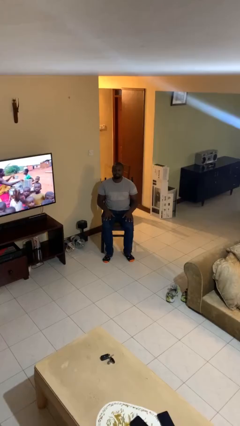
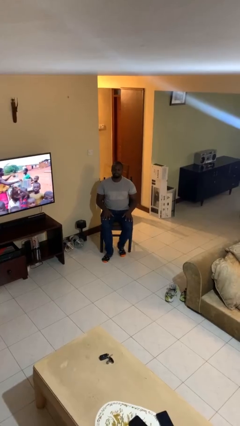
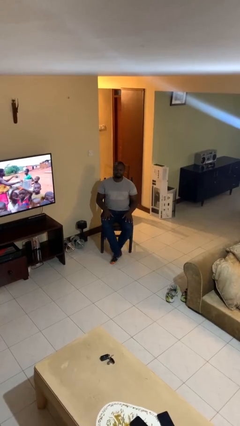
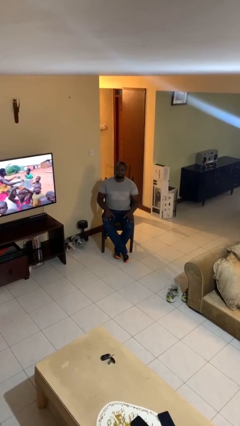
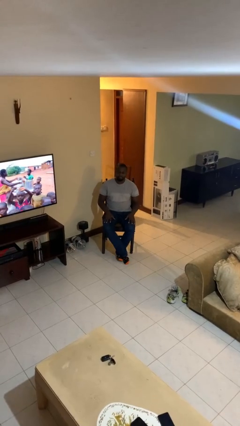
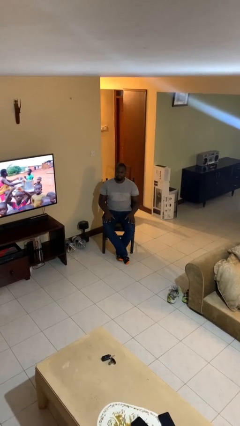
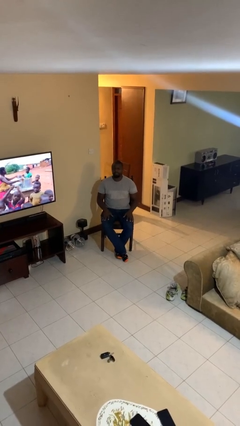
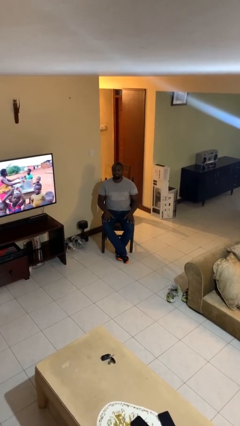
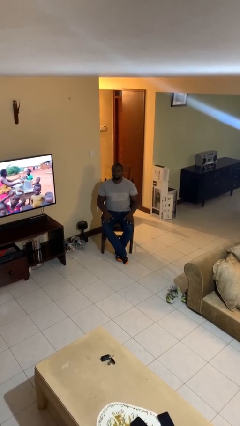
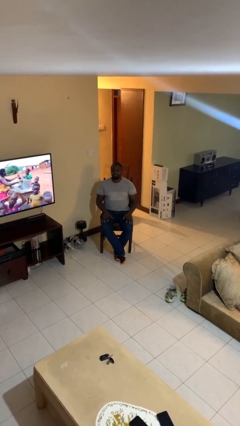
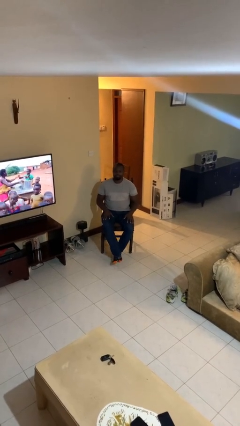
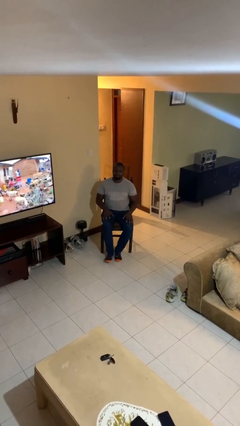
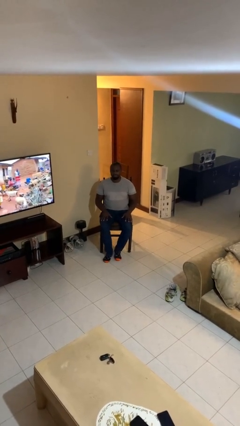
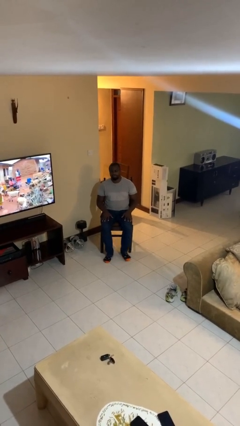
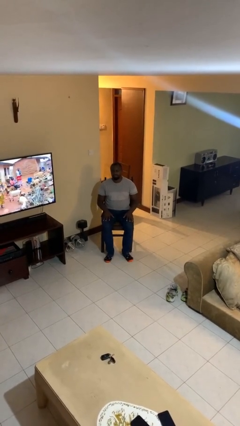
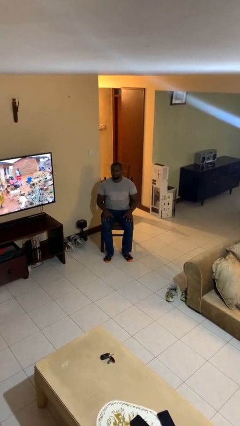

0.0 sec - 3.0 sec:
person crosses legs

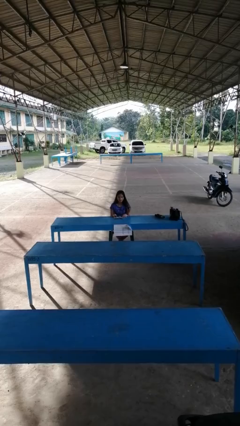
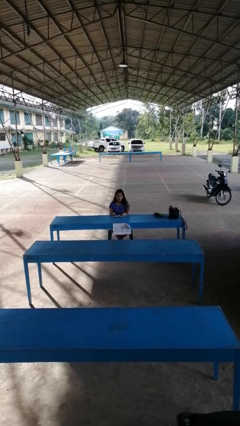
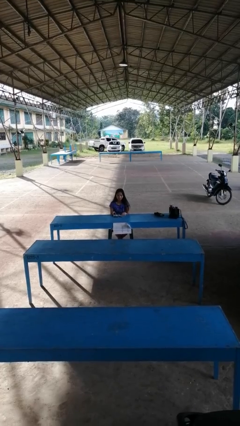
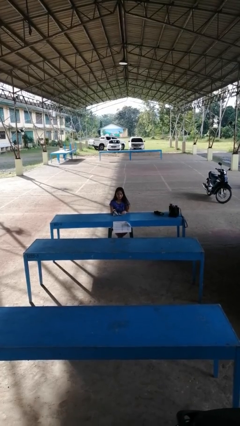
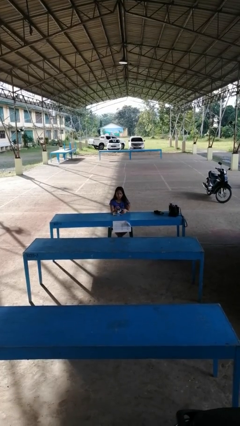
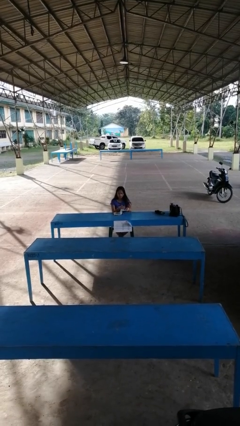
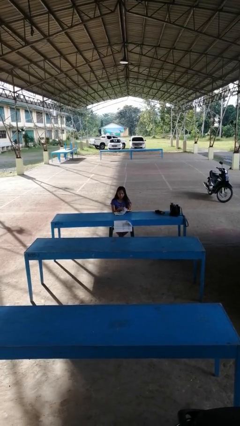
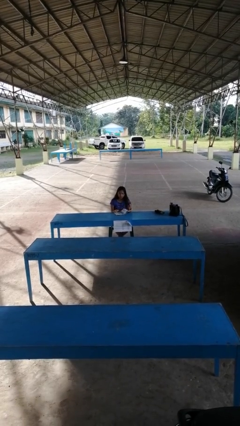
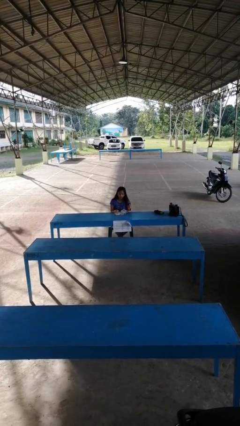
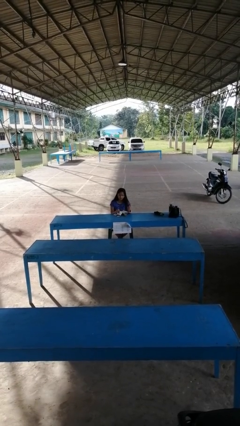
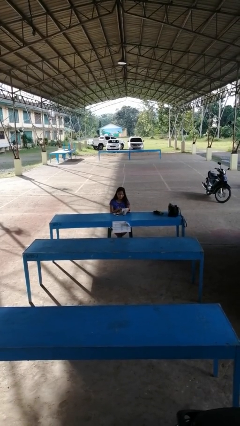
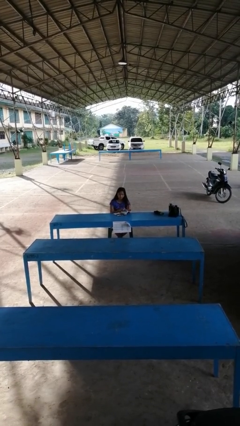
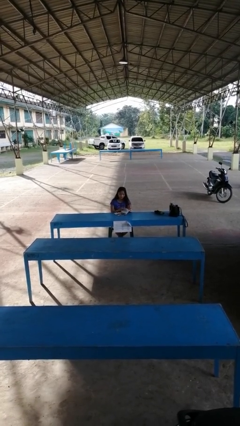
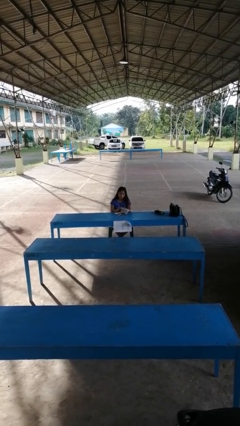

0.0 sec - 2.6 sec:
person reads magazine

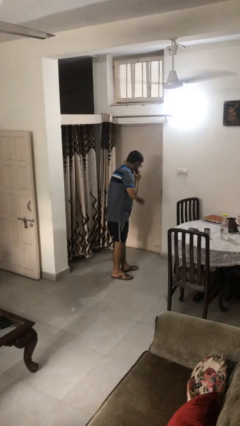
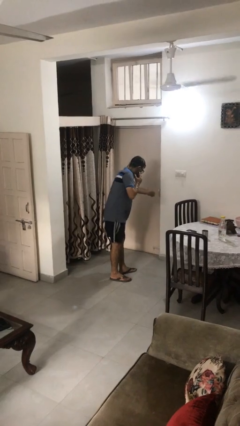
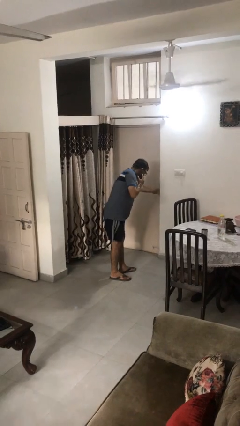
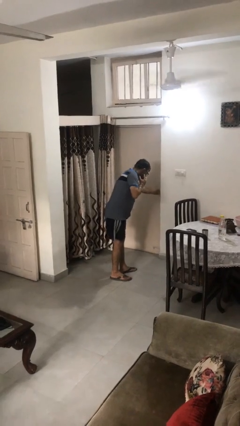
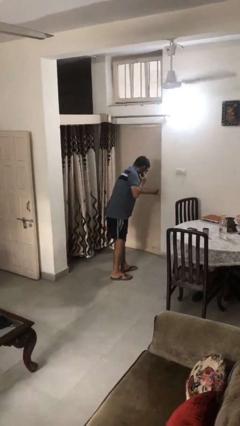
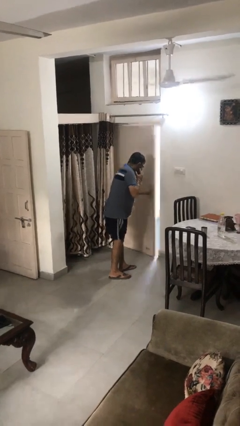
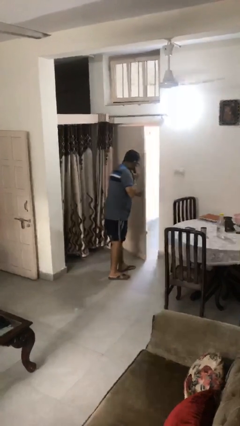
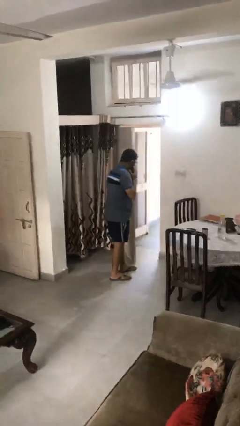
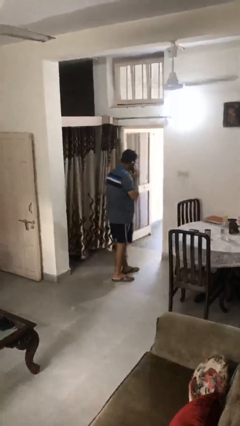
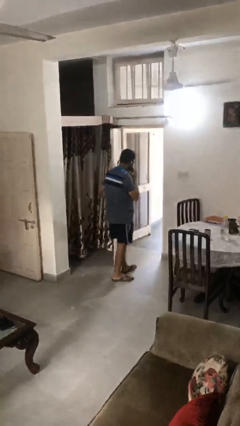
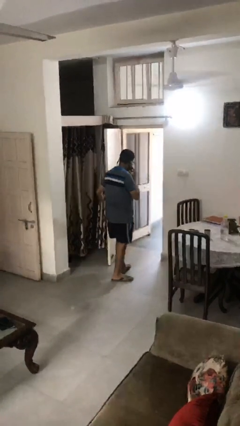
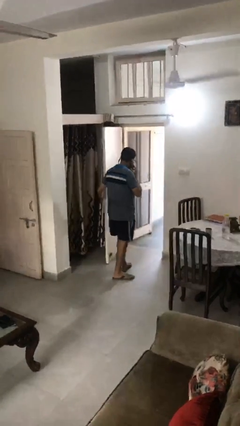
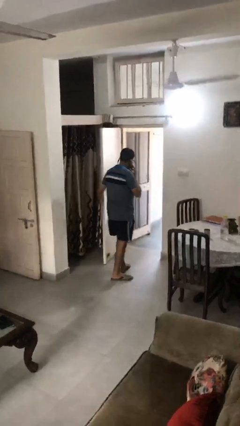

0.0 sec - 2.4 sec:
person opens facility door

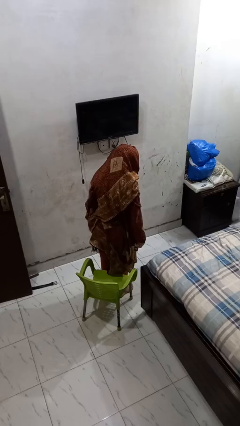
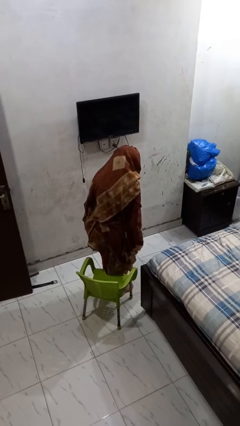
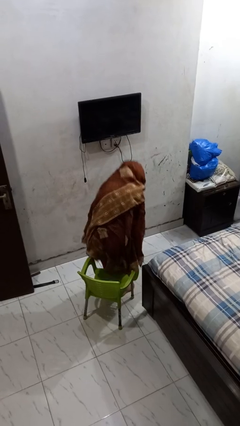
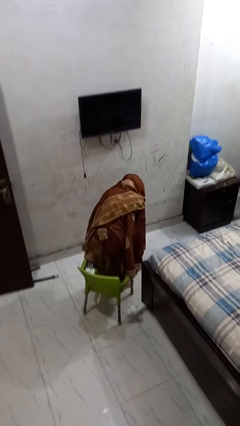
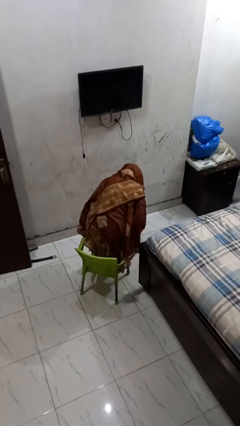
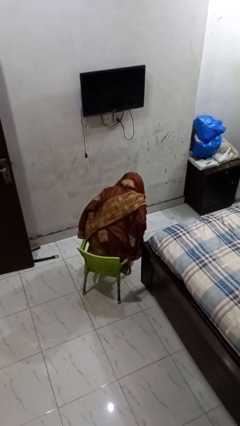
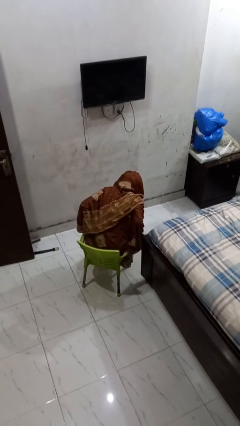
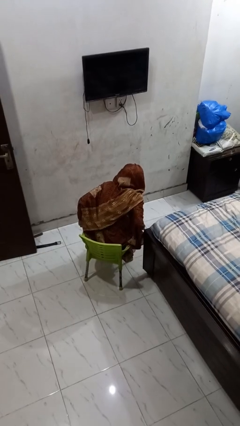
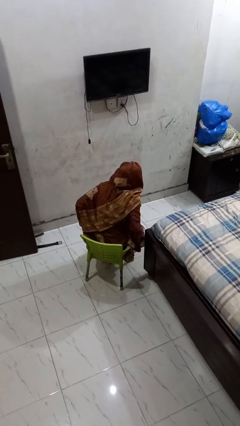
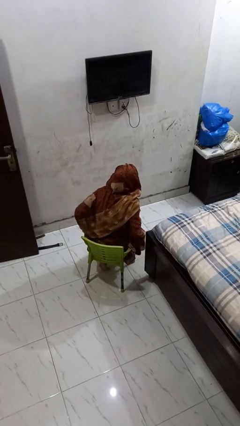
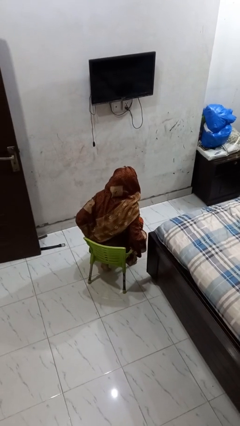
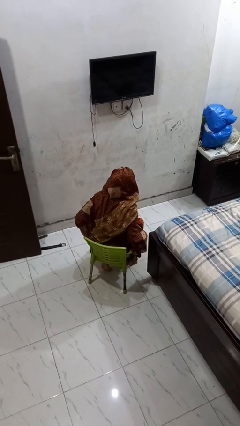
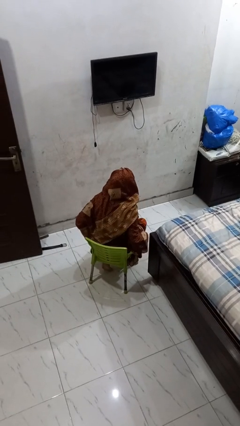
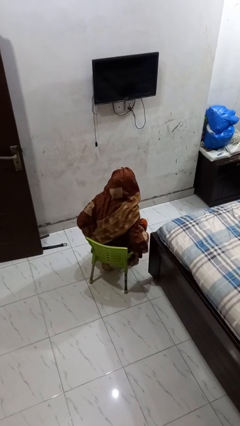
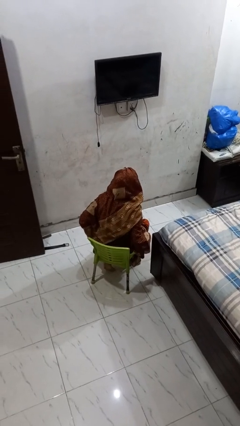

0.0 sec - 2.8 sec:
person sits down

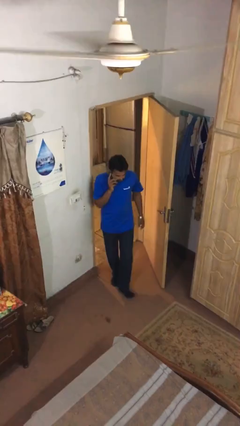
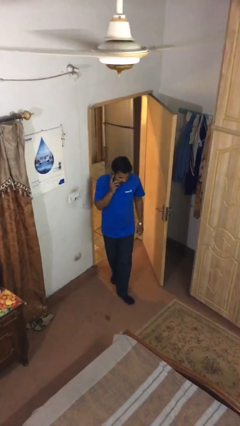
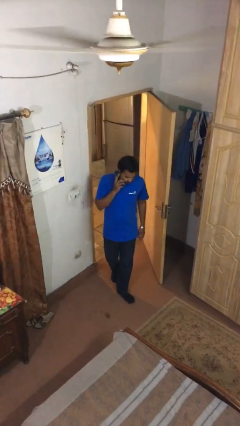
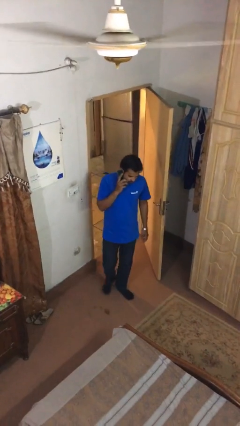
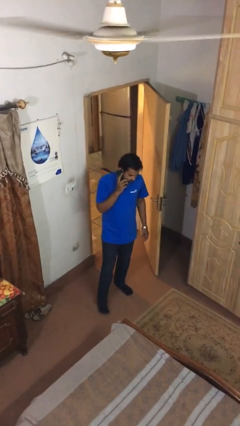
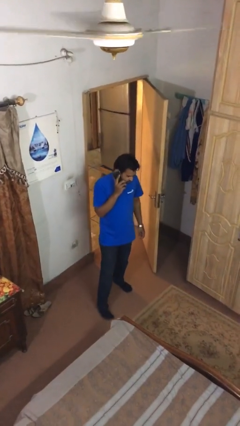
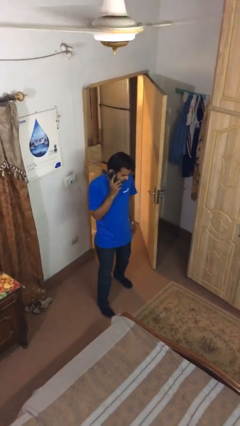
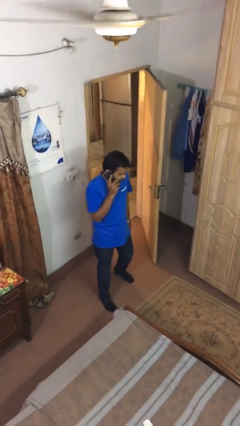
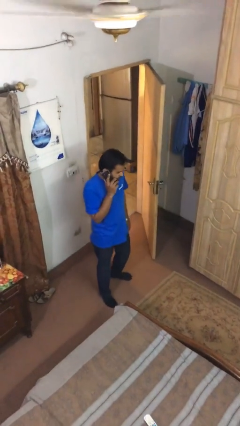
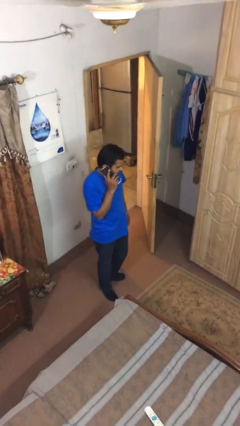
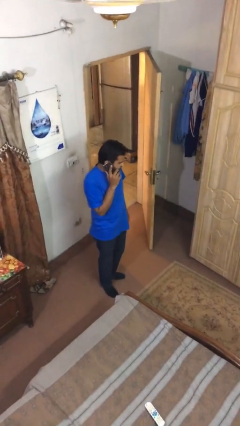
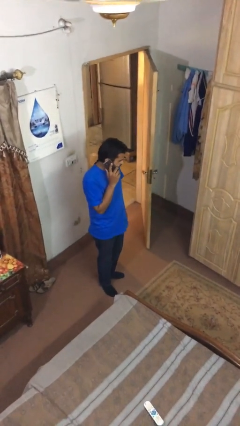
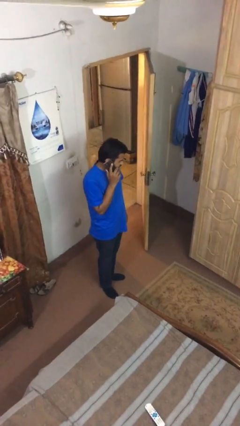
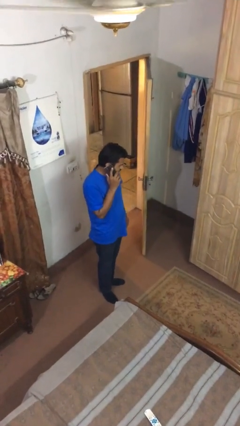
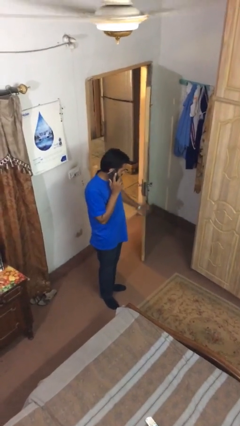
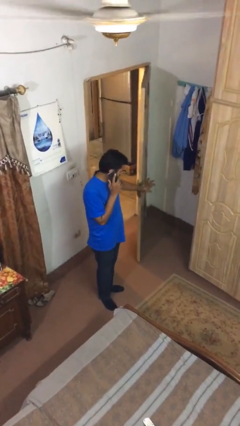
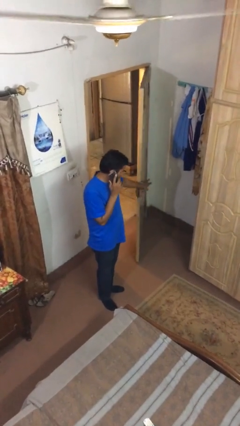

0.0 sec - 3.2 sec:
person enters scene through structure

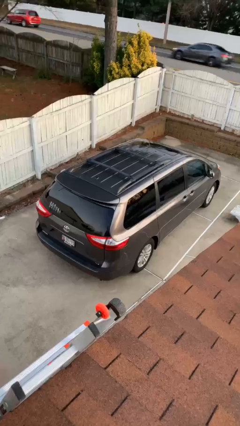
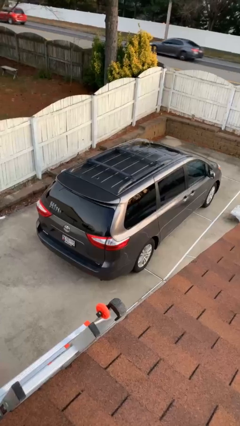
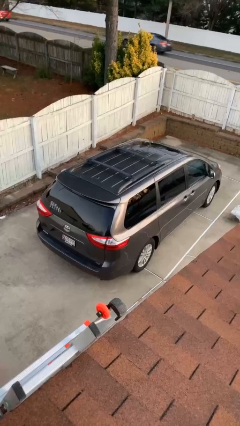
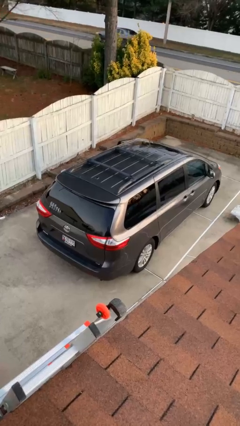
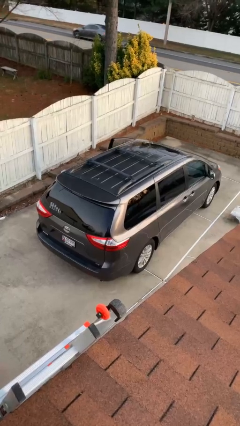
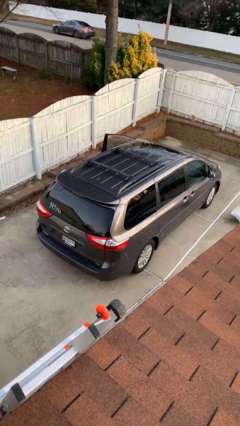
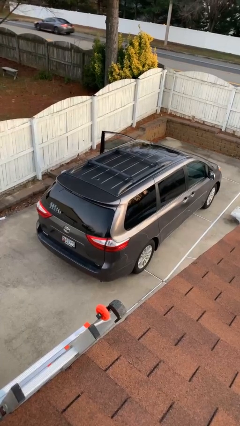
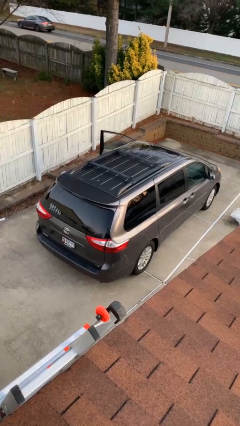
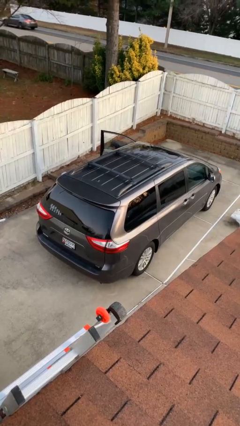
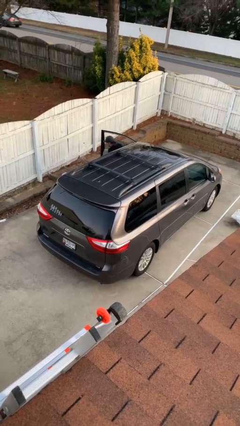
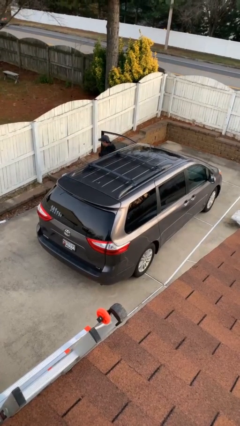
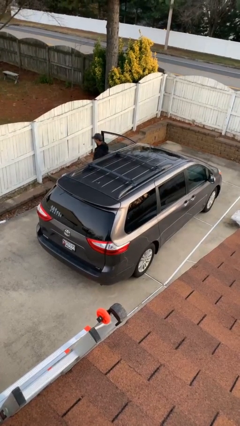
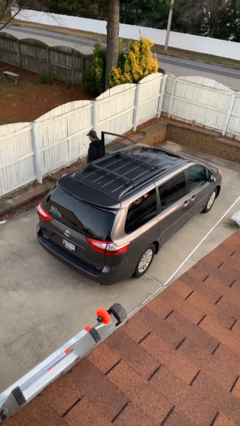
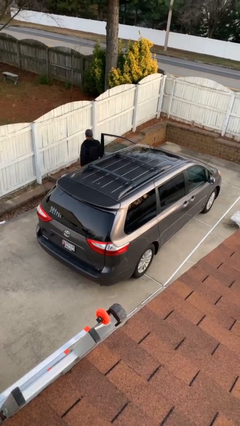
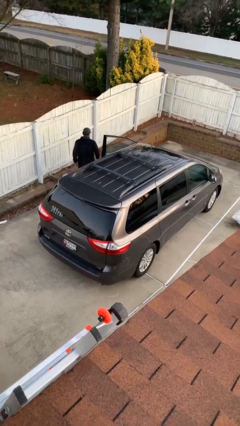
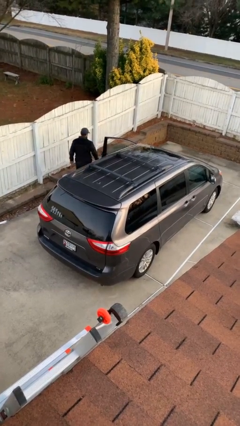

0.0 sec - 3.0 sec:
car drops off person

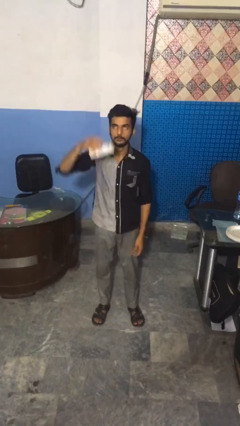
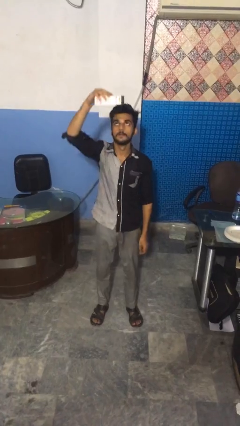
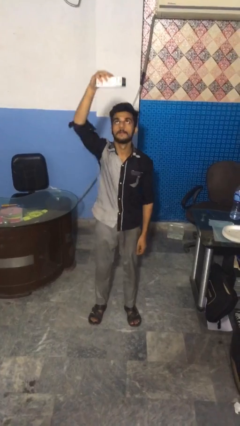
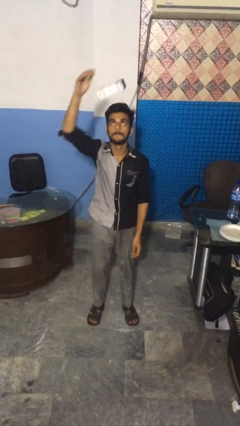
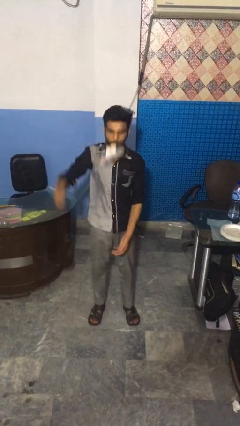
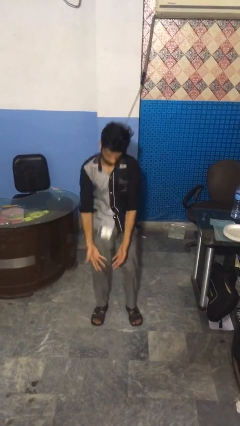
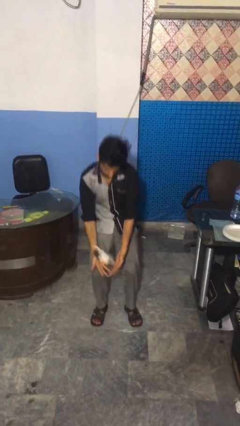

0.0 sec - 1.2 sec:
person drops object
